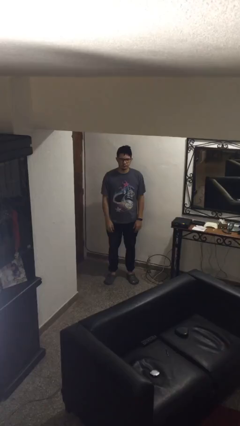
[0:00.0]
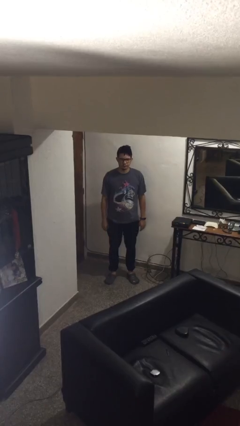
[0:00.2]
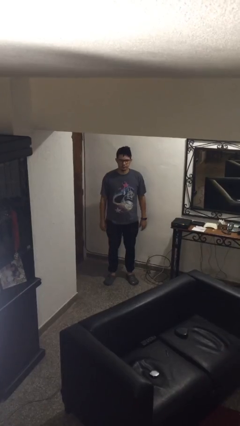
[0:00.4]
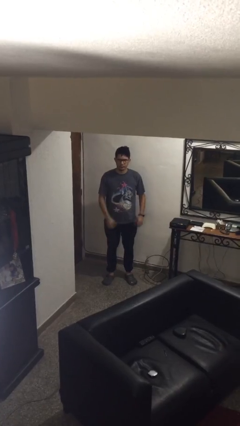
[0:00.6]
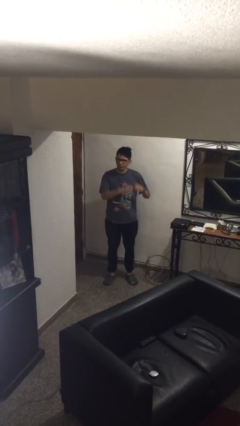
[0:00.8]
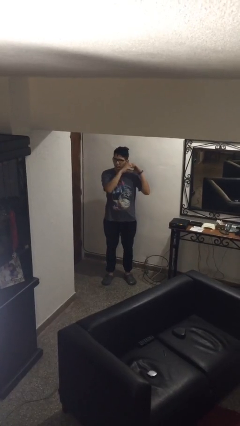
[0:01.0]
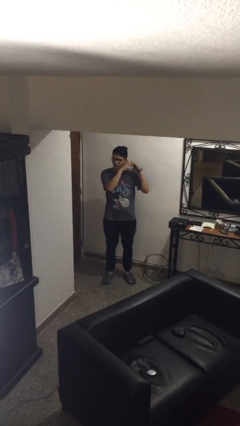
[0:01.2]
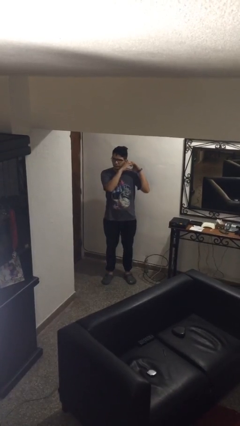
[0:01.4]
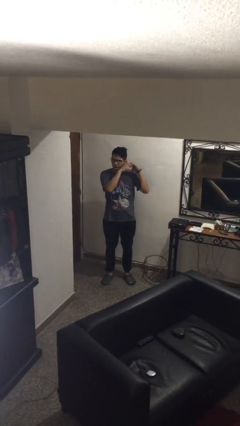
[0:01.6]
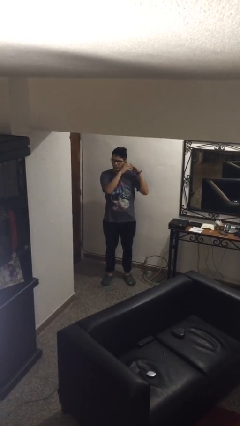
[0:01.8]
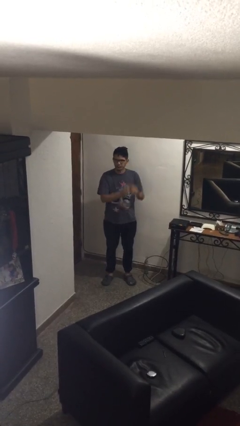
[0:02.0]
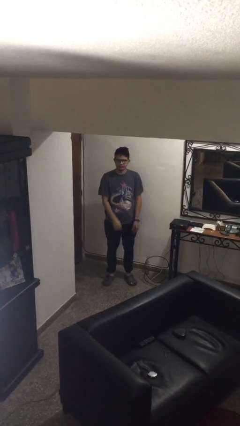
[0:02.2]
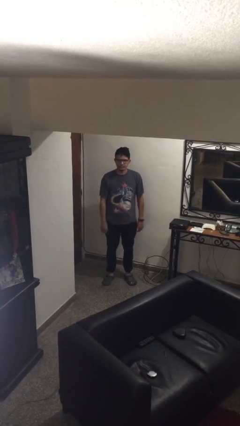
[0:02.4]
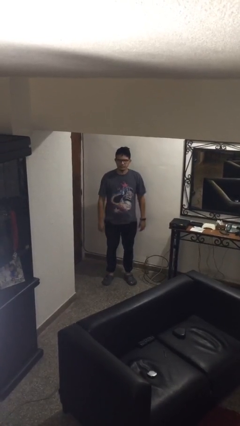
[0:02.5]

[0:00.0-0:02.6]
person gestures heart

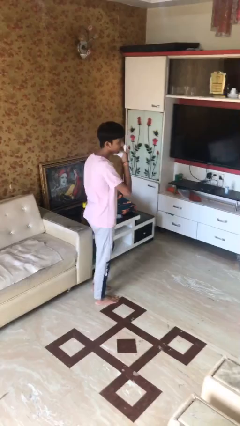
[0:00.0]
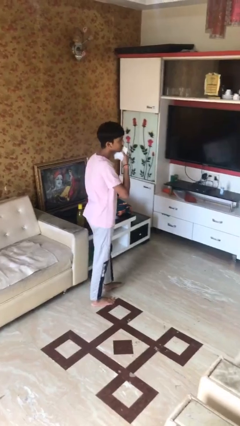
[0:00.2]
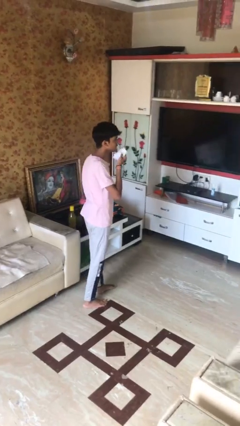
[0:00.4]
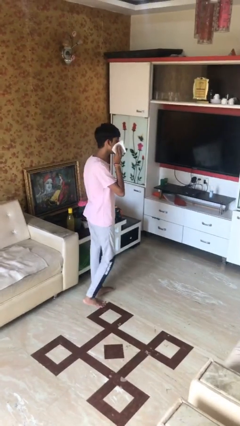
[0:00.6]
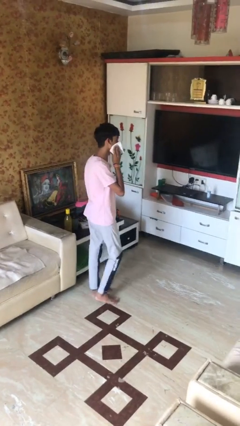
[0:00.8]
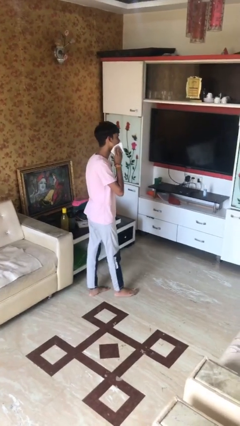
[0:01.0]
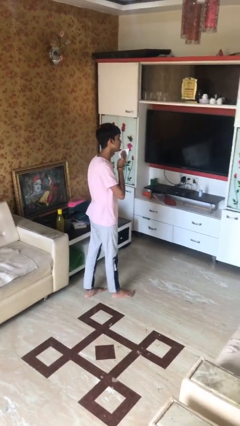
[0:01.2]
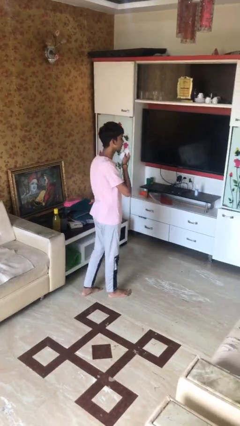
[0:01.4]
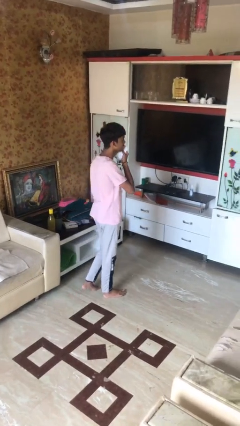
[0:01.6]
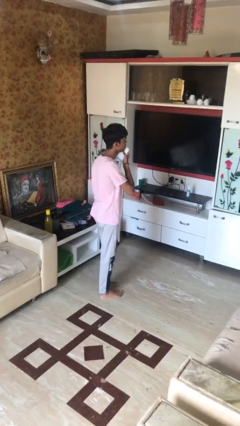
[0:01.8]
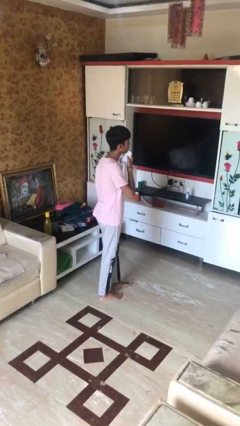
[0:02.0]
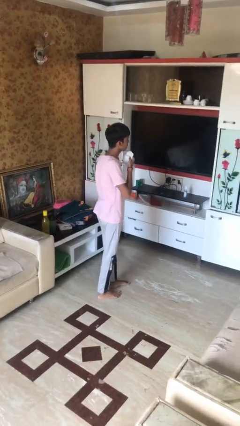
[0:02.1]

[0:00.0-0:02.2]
person wipes mouth with napkin

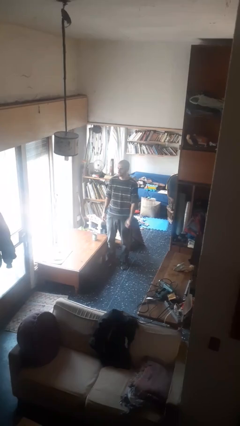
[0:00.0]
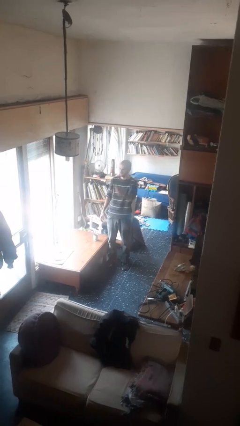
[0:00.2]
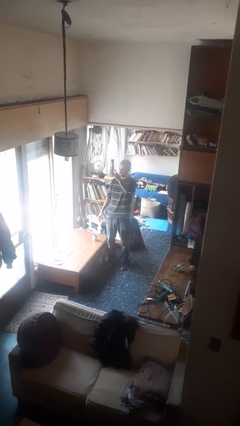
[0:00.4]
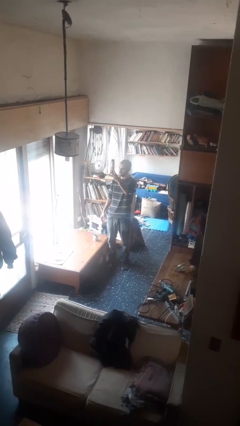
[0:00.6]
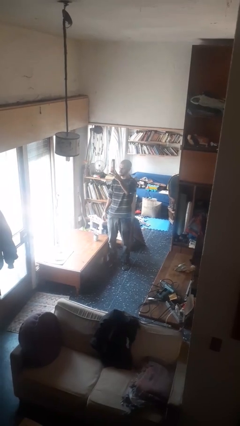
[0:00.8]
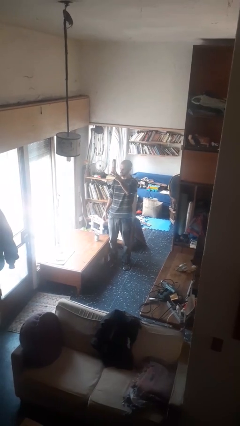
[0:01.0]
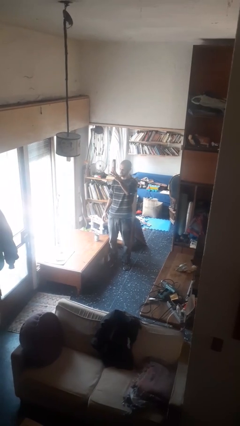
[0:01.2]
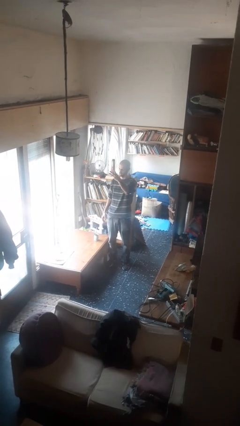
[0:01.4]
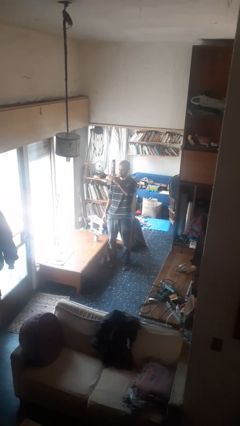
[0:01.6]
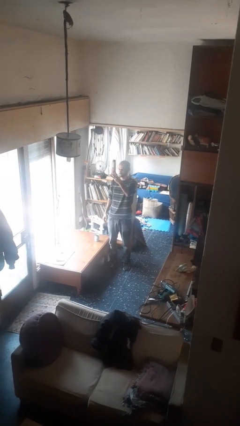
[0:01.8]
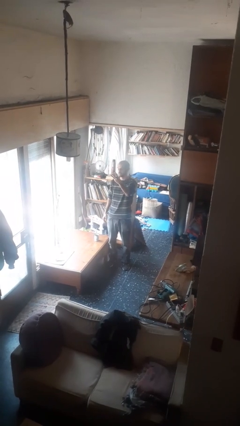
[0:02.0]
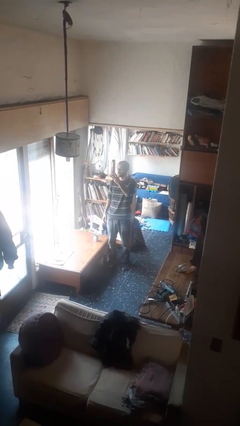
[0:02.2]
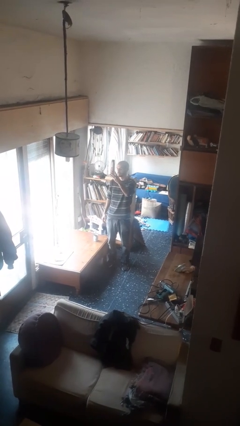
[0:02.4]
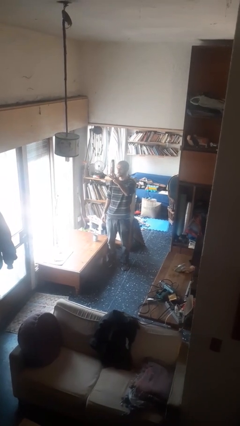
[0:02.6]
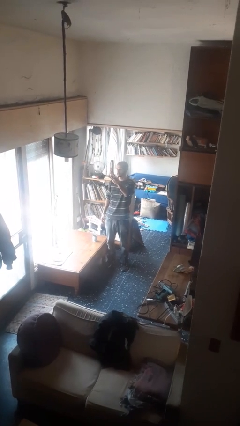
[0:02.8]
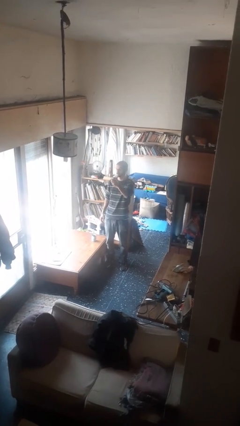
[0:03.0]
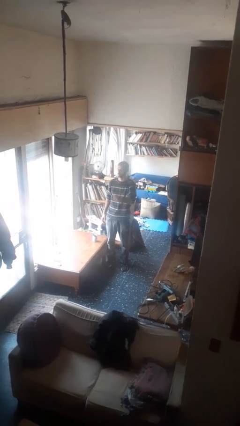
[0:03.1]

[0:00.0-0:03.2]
person gestures number three

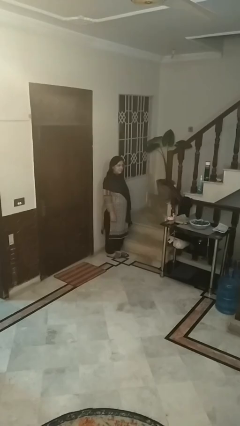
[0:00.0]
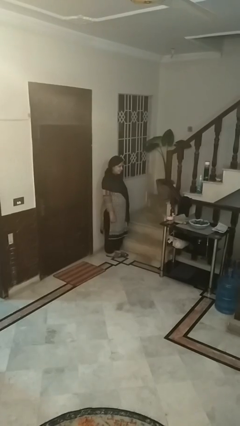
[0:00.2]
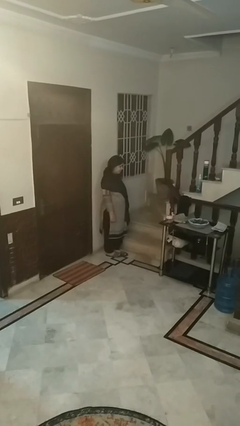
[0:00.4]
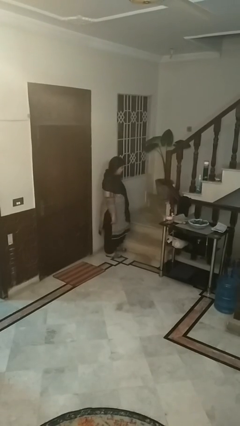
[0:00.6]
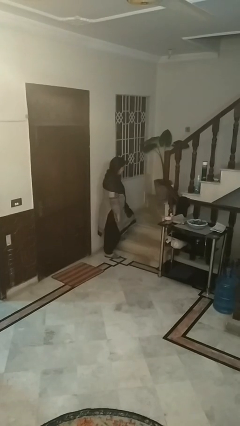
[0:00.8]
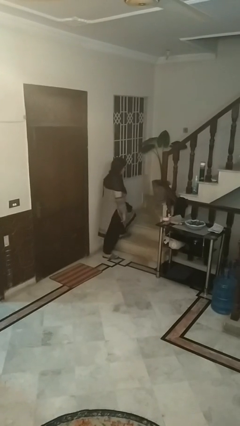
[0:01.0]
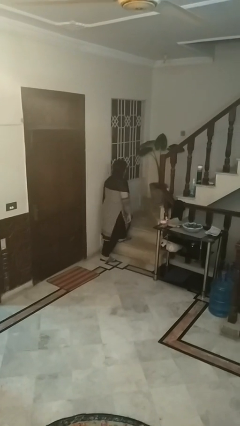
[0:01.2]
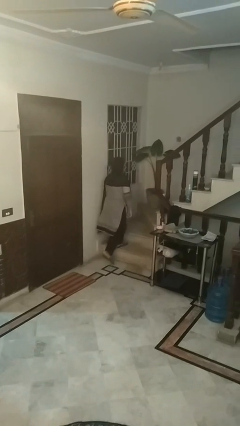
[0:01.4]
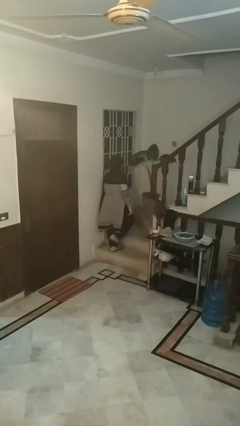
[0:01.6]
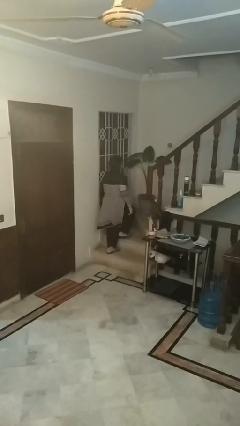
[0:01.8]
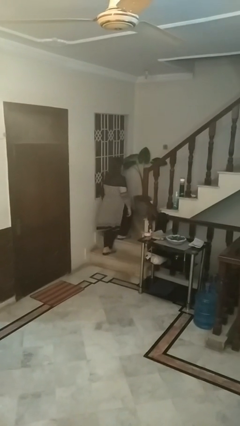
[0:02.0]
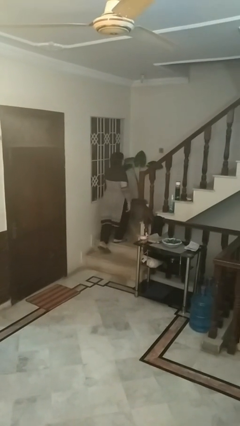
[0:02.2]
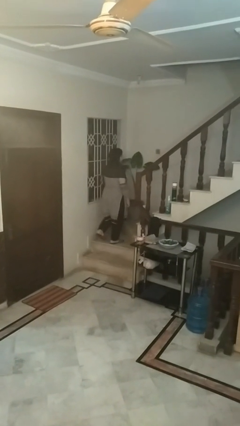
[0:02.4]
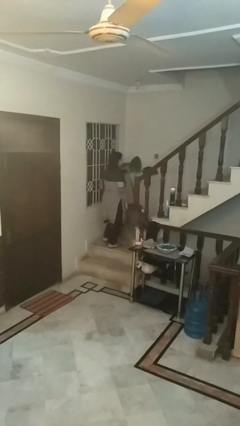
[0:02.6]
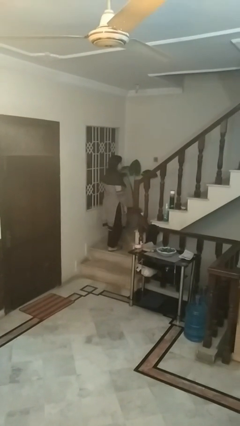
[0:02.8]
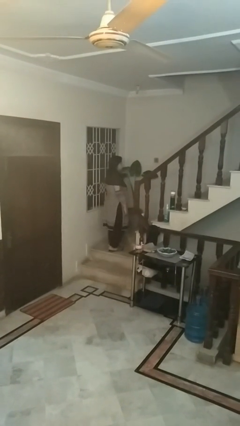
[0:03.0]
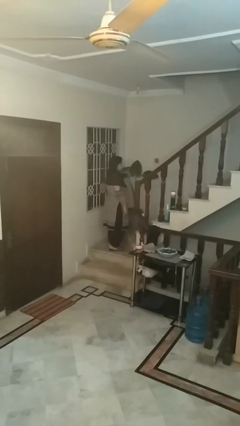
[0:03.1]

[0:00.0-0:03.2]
person climbs up stairs

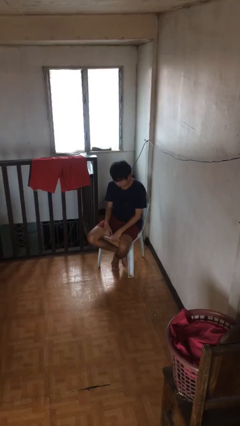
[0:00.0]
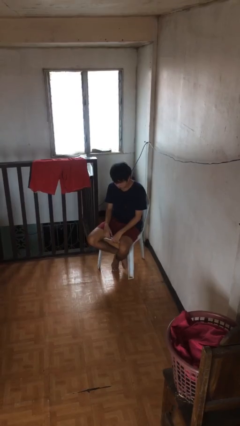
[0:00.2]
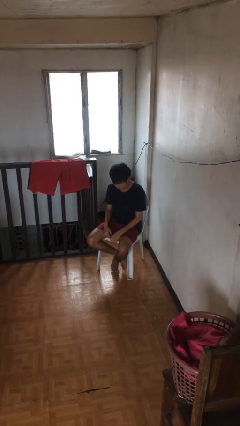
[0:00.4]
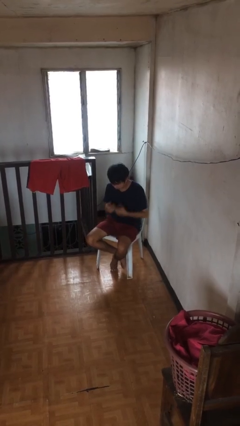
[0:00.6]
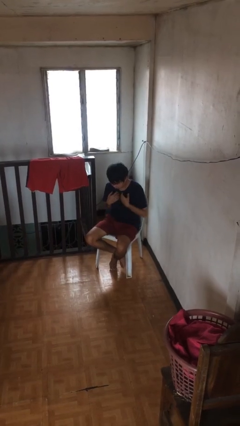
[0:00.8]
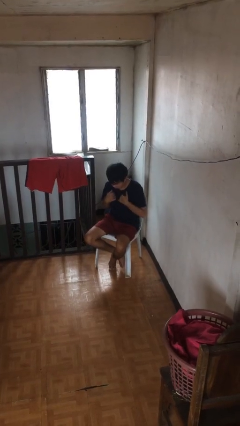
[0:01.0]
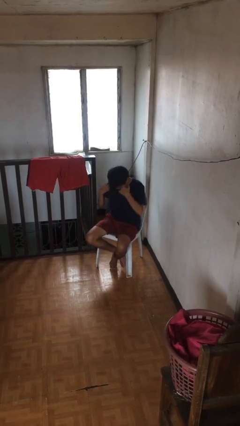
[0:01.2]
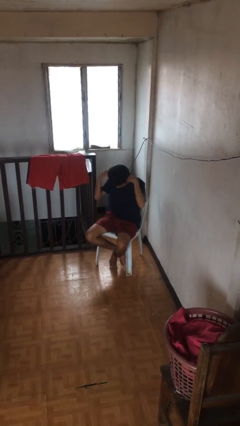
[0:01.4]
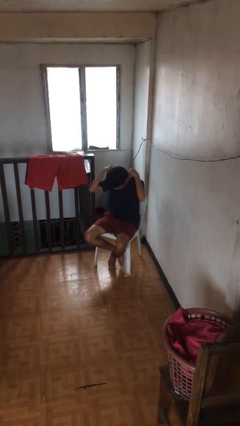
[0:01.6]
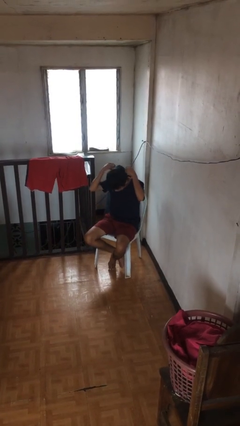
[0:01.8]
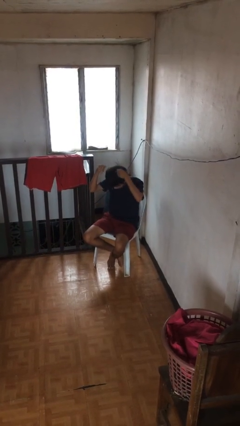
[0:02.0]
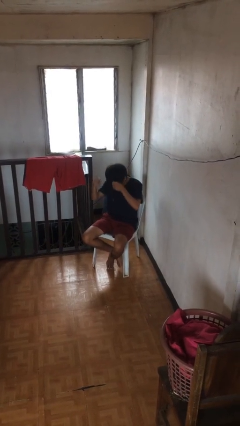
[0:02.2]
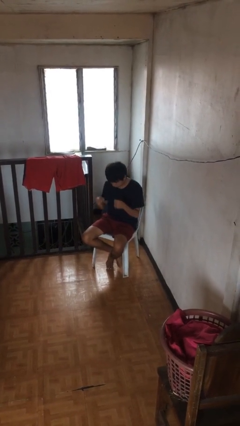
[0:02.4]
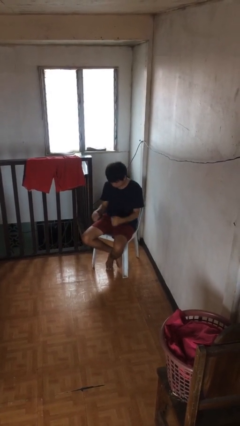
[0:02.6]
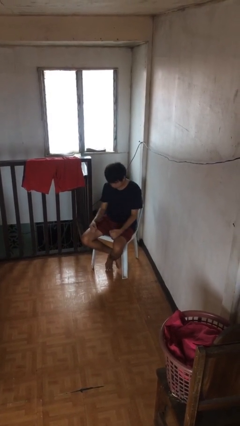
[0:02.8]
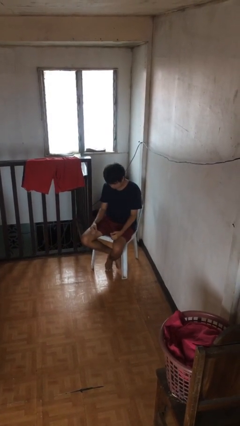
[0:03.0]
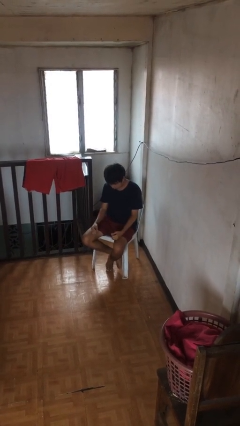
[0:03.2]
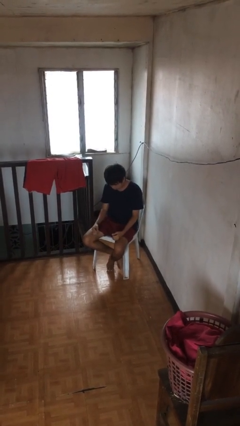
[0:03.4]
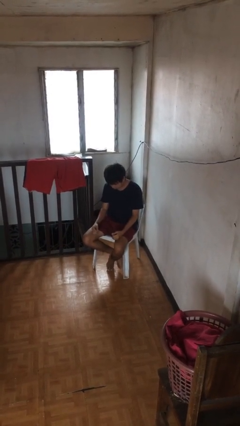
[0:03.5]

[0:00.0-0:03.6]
person takes off necklace

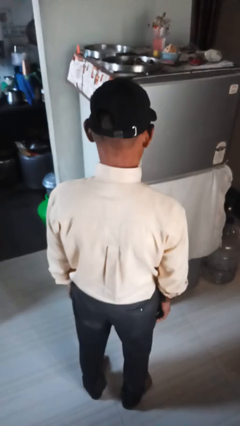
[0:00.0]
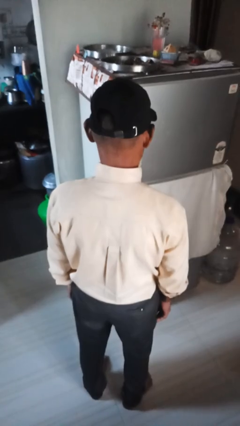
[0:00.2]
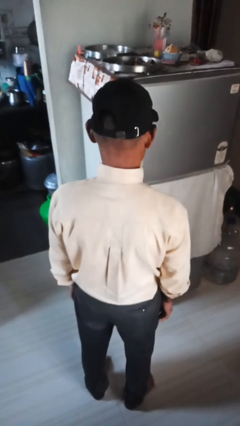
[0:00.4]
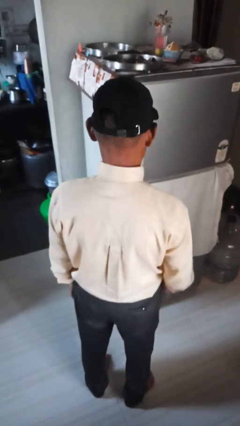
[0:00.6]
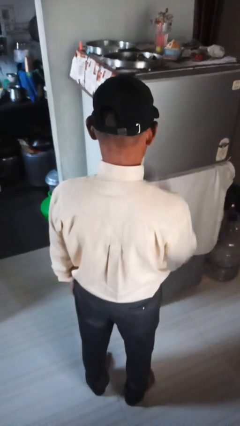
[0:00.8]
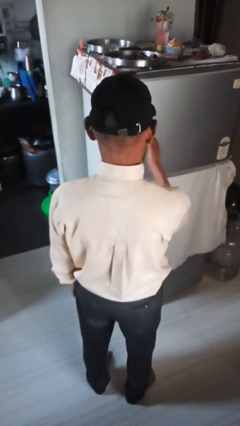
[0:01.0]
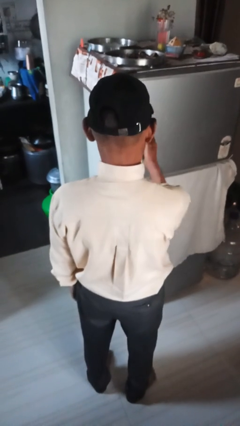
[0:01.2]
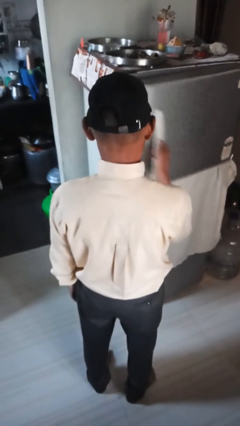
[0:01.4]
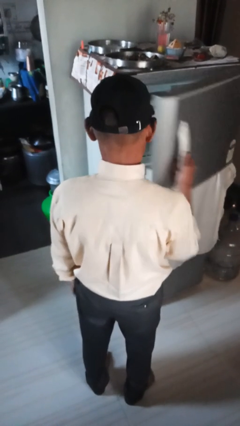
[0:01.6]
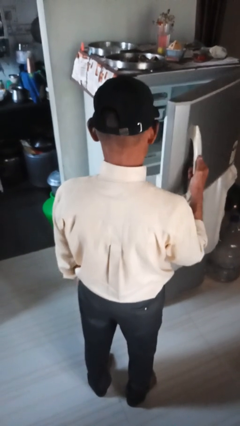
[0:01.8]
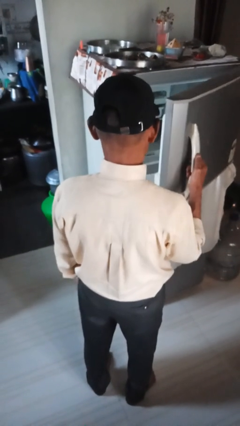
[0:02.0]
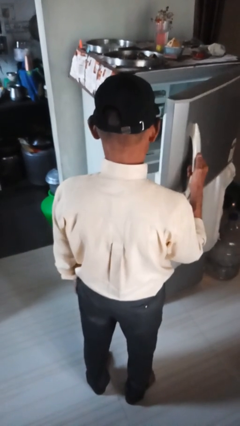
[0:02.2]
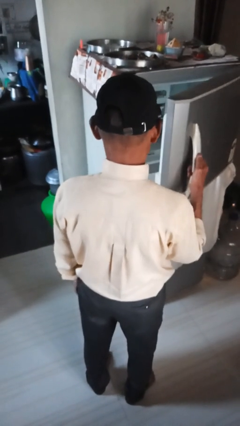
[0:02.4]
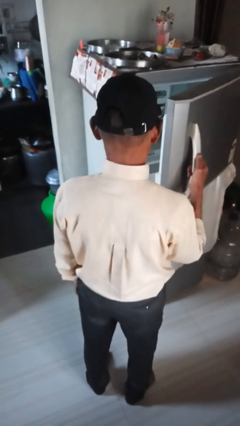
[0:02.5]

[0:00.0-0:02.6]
person opens clothes washer
